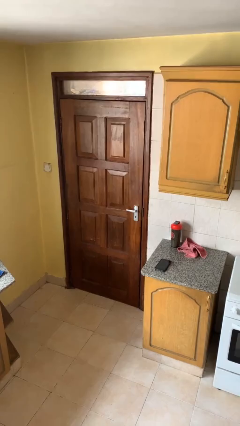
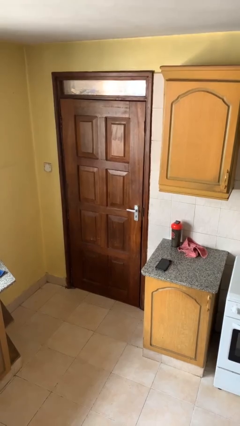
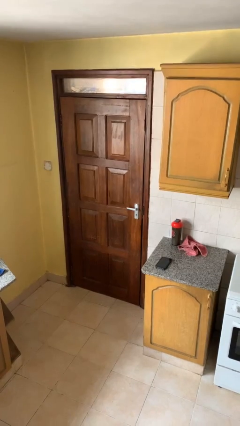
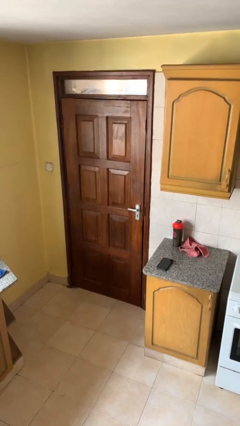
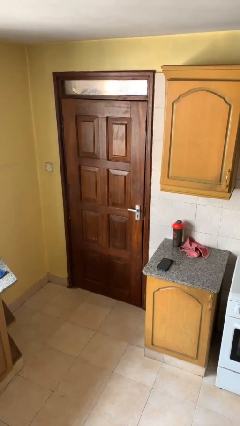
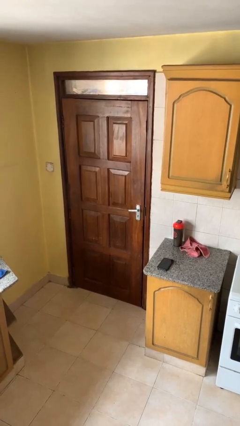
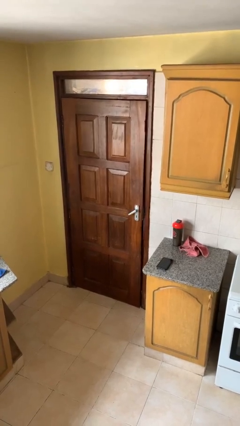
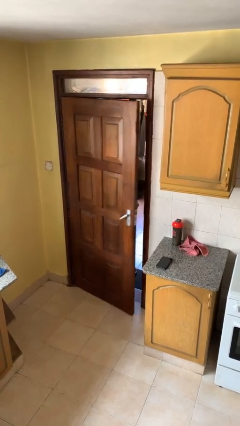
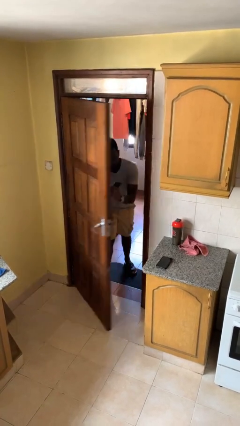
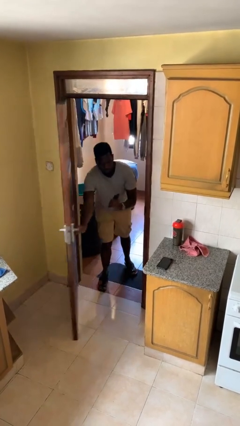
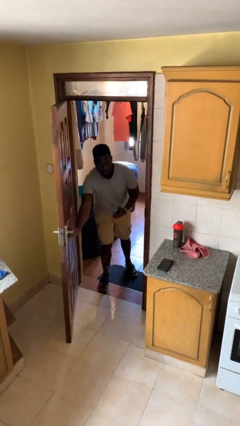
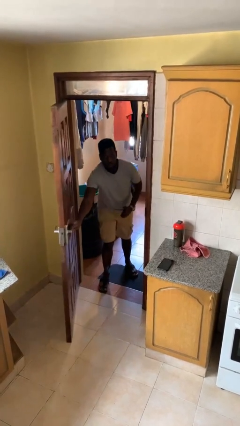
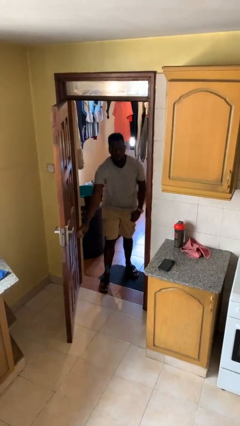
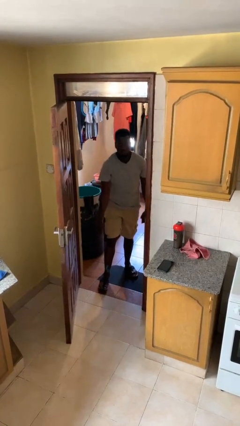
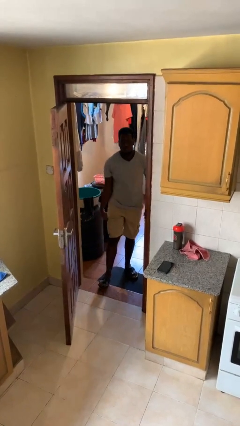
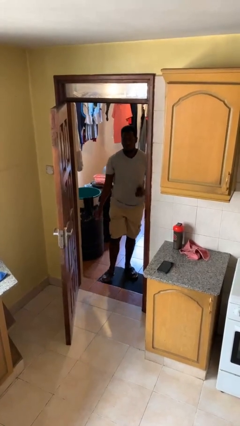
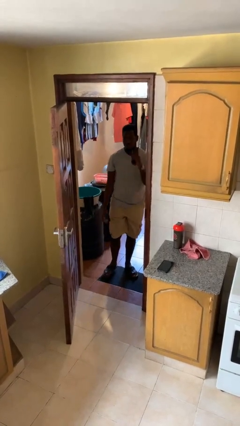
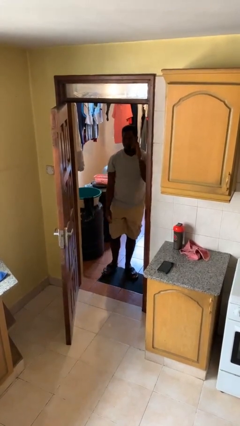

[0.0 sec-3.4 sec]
person opens facility door

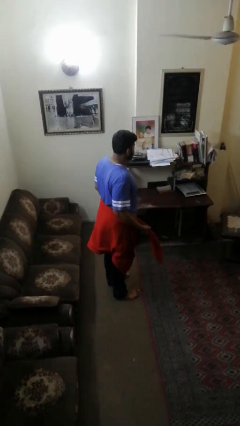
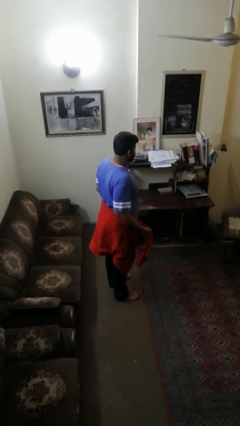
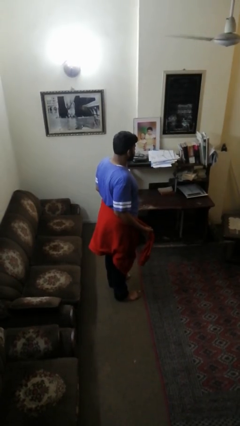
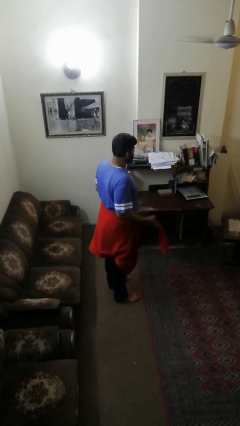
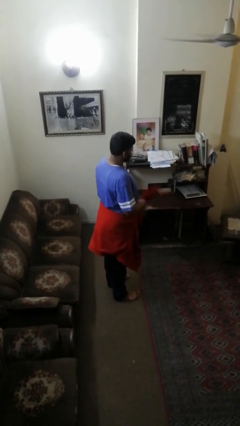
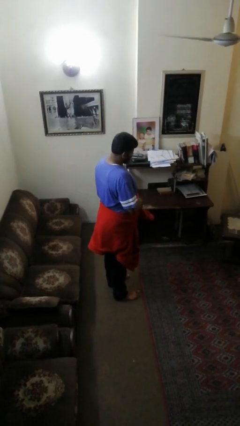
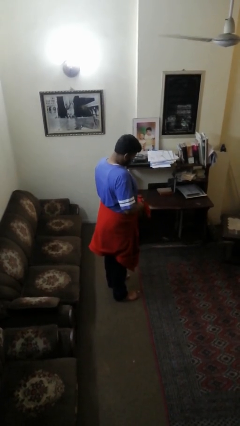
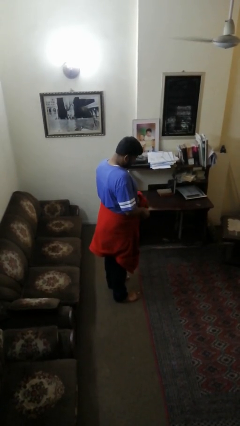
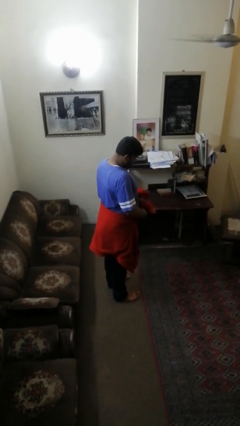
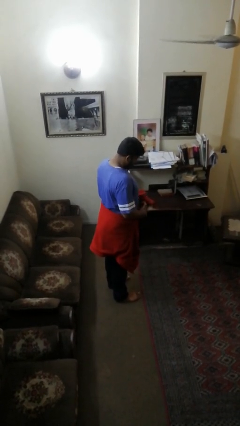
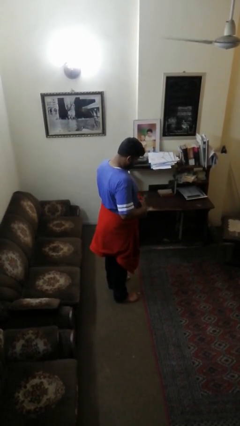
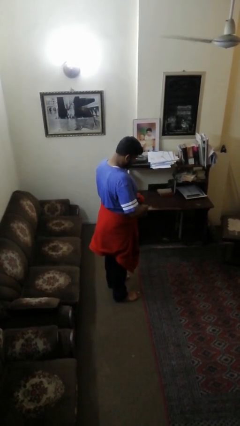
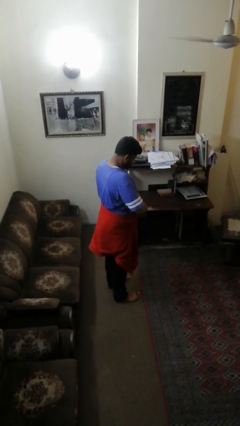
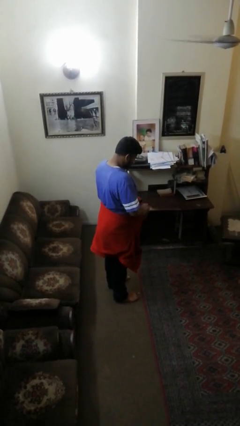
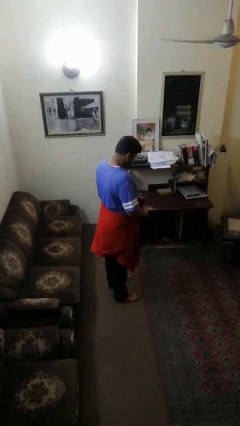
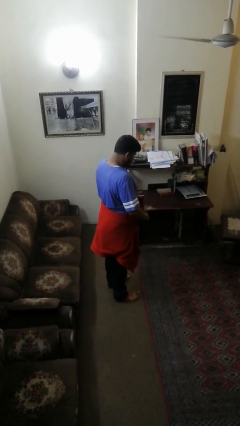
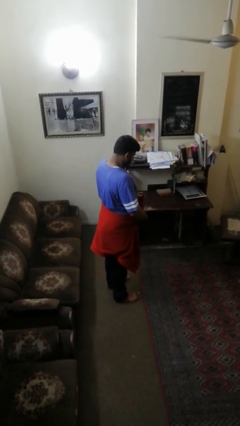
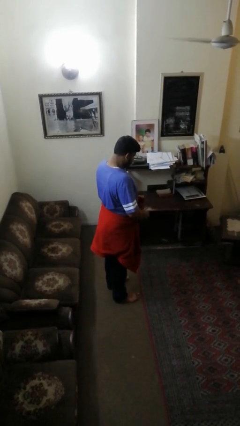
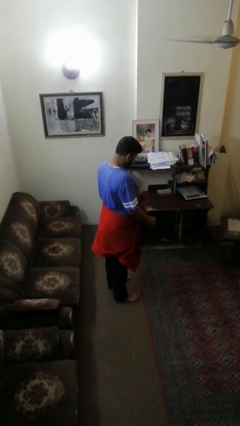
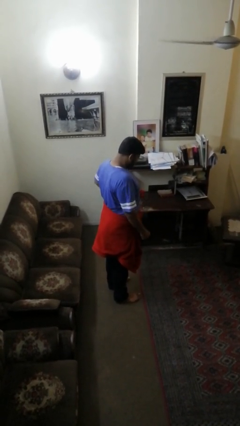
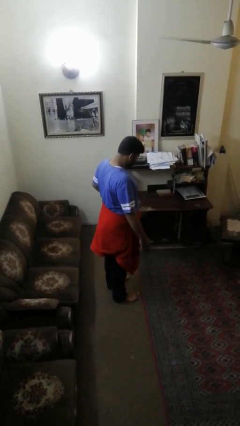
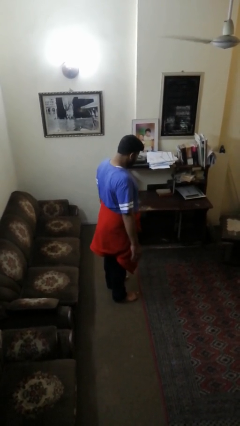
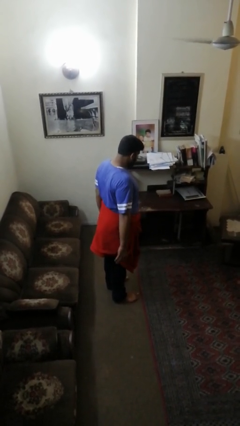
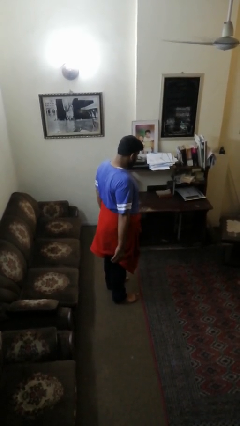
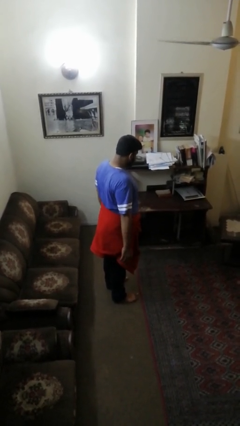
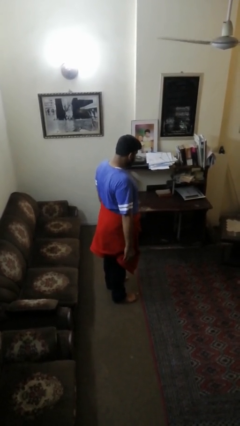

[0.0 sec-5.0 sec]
person ties jacket around waist

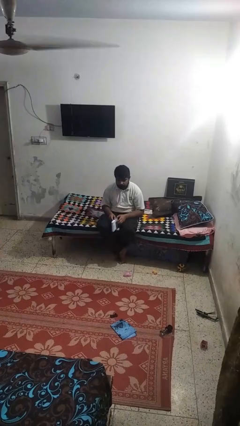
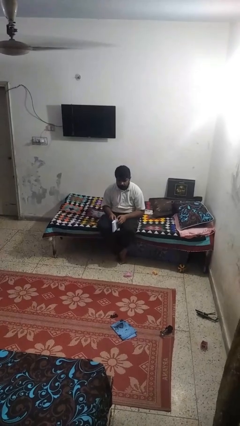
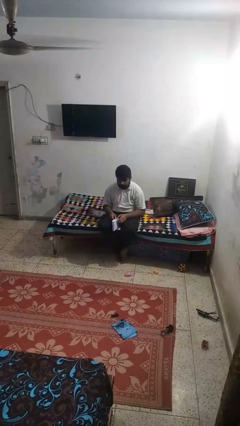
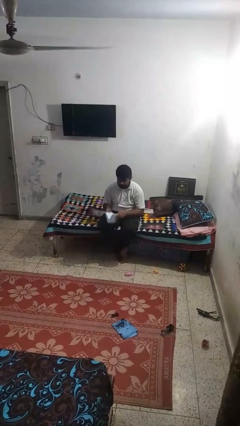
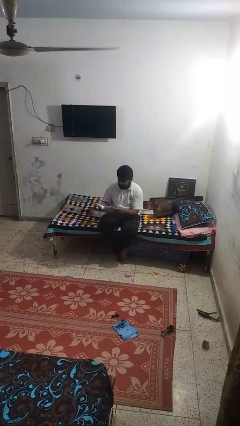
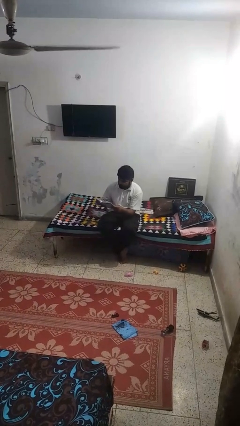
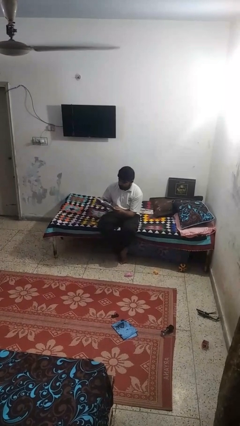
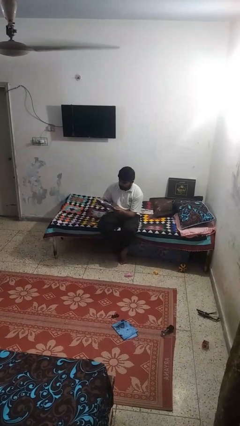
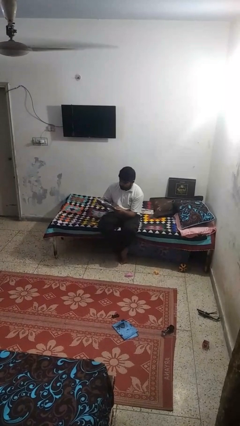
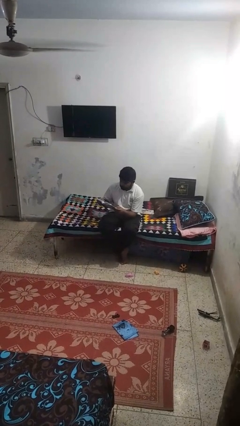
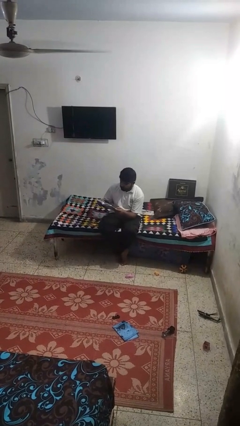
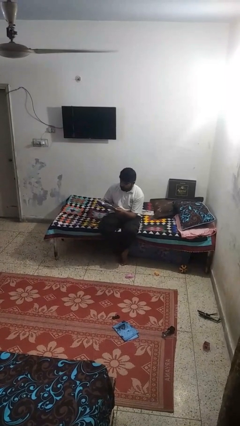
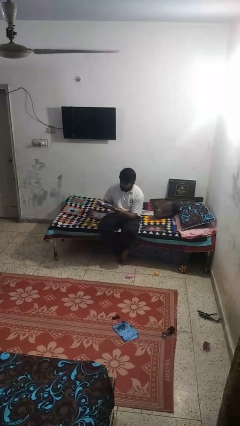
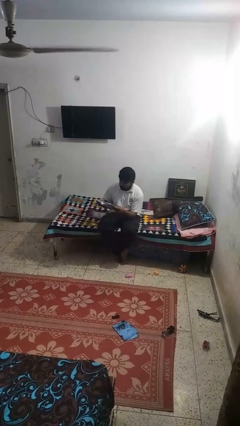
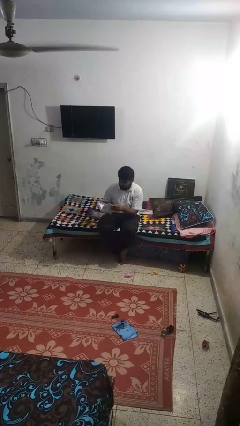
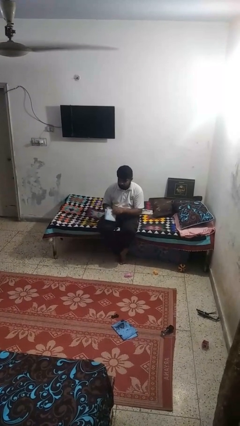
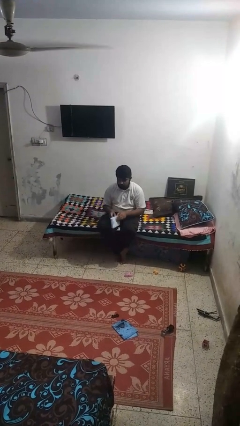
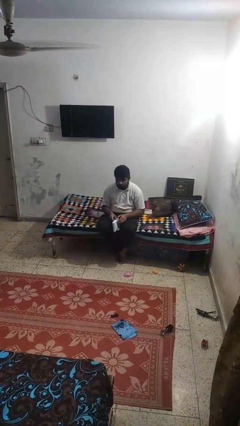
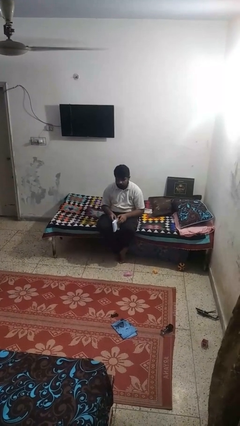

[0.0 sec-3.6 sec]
person reads book

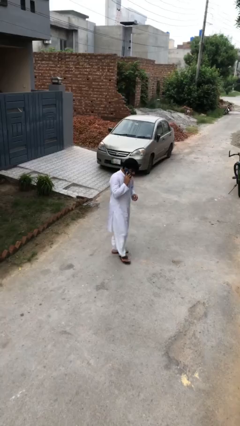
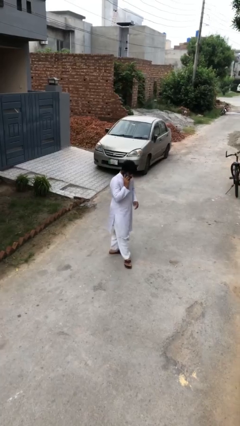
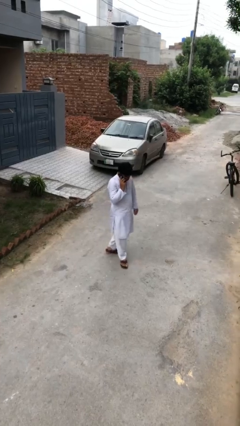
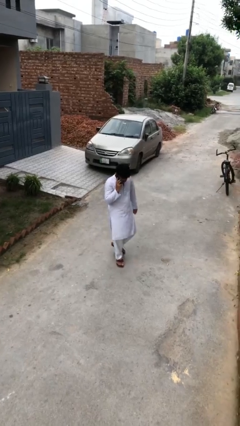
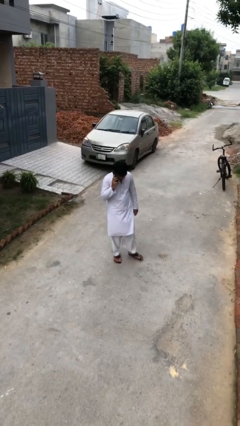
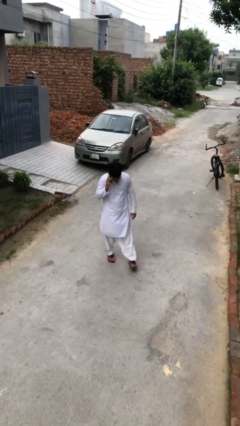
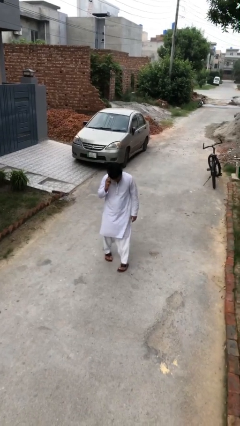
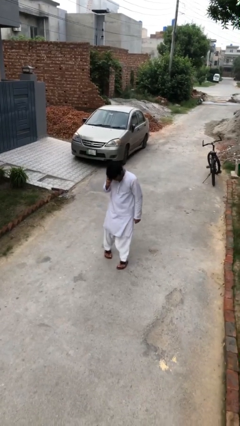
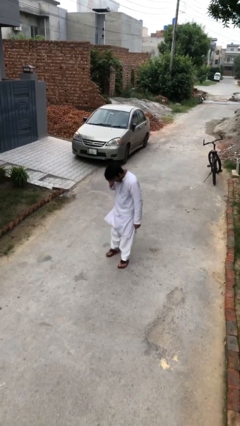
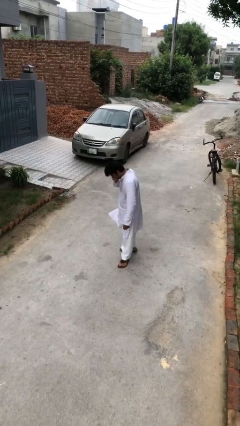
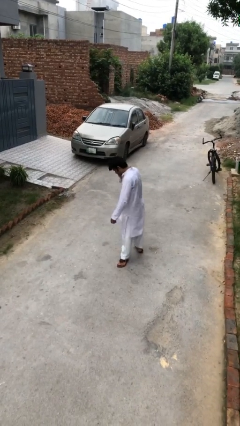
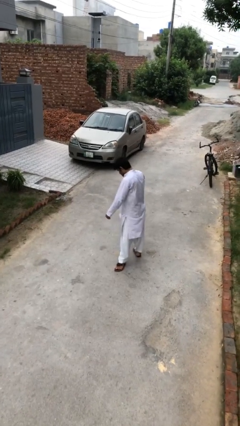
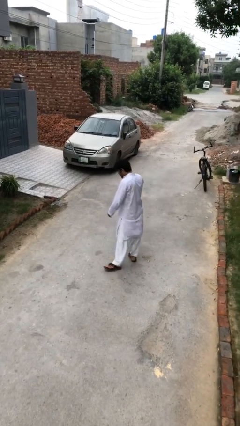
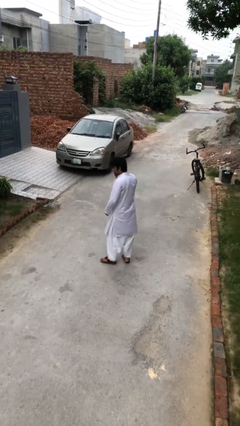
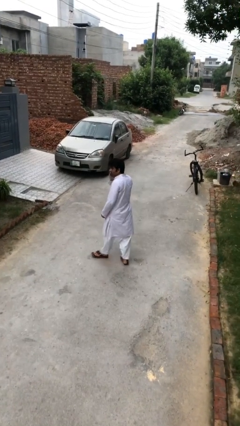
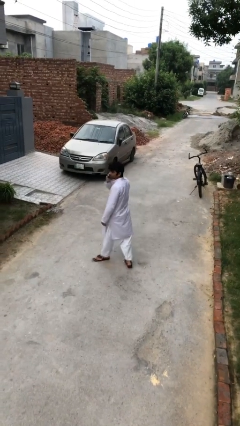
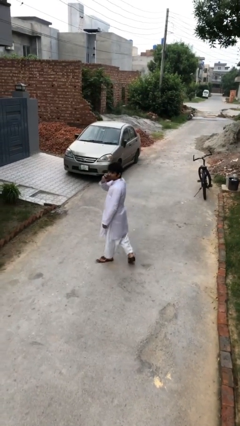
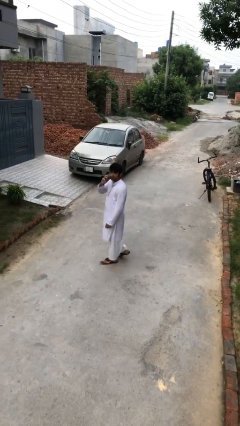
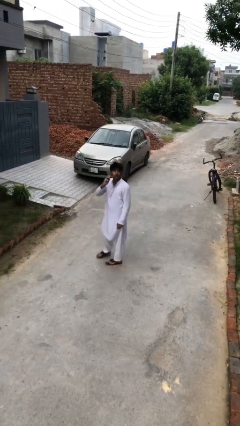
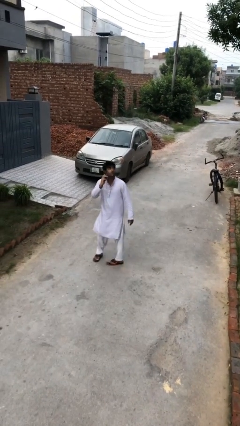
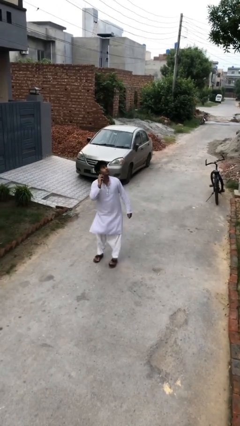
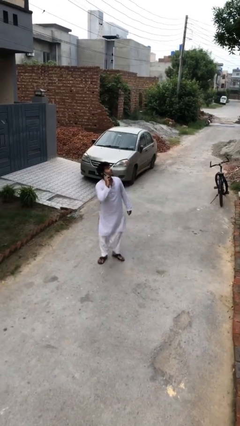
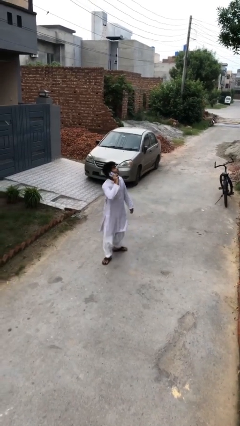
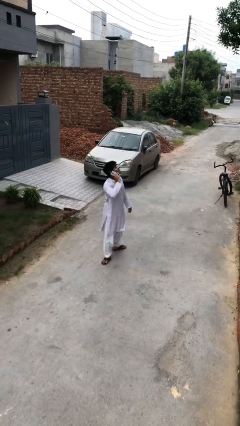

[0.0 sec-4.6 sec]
person talks on phone

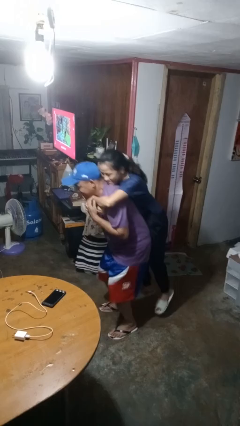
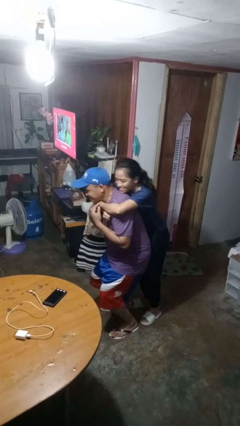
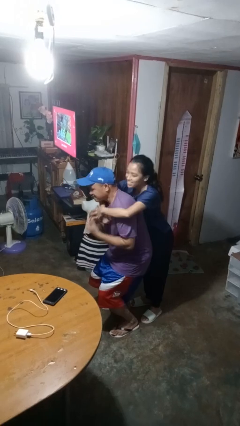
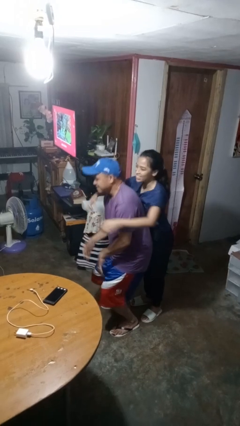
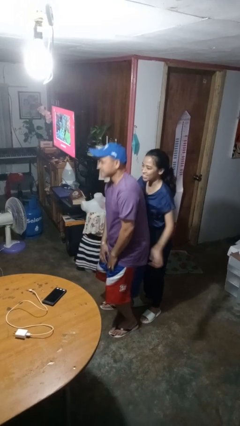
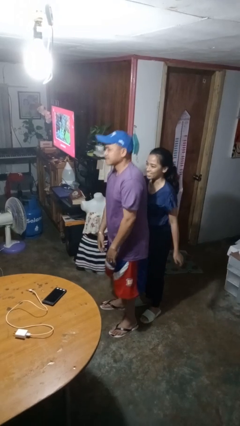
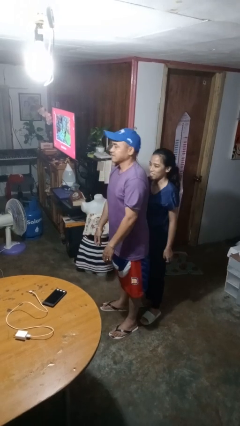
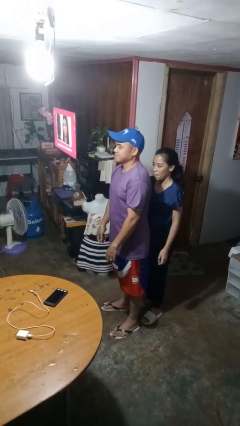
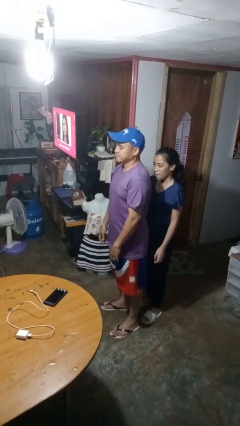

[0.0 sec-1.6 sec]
person puts down person
